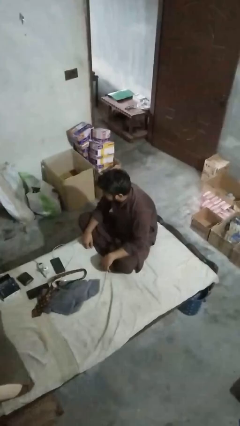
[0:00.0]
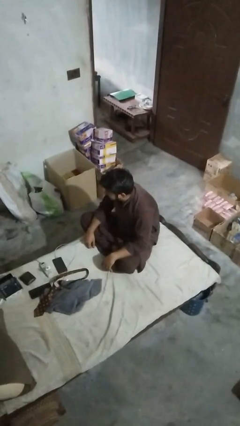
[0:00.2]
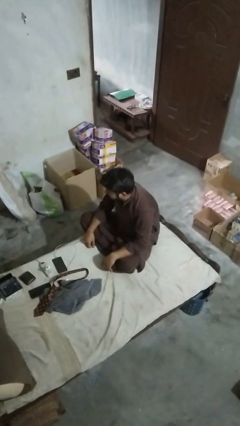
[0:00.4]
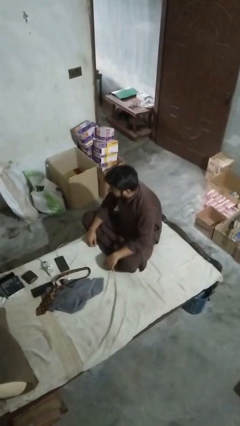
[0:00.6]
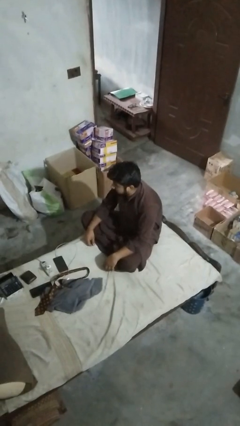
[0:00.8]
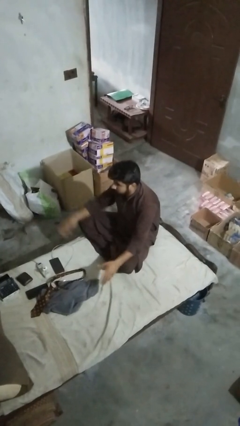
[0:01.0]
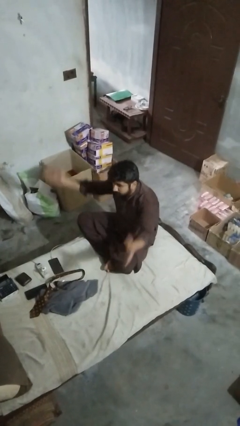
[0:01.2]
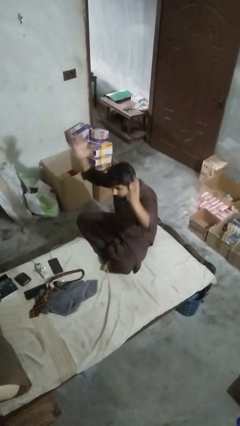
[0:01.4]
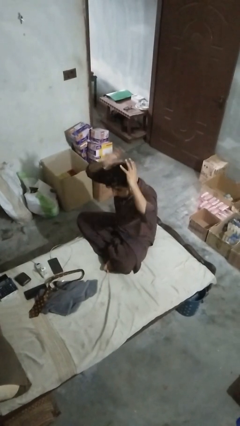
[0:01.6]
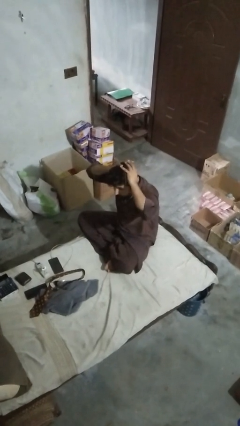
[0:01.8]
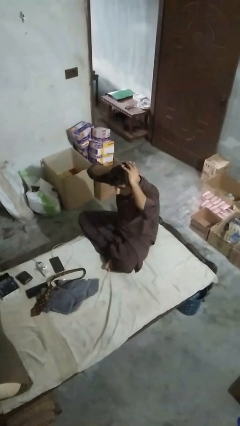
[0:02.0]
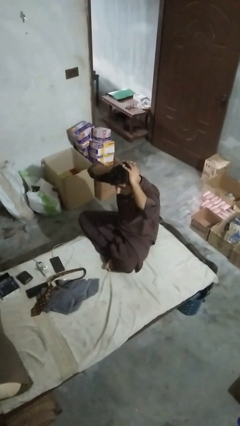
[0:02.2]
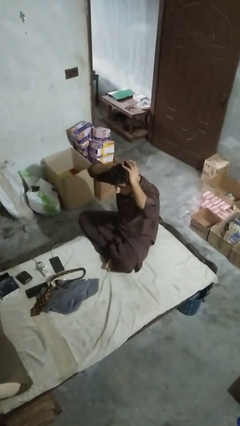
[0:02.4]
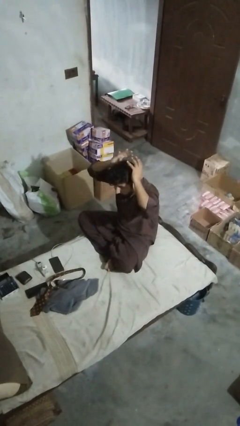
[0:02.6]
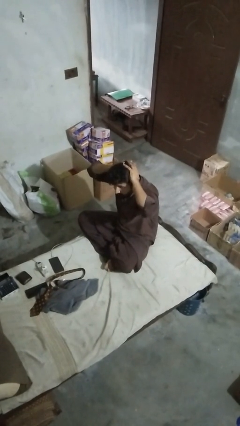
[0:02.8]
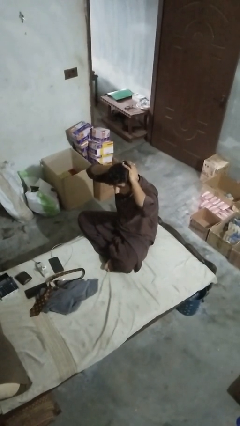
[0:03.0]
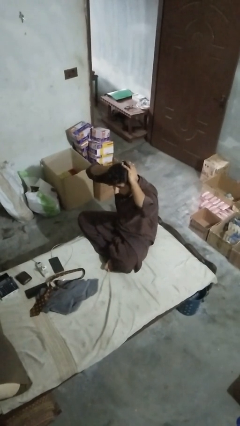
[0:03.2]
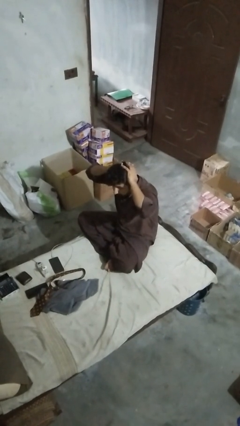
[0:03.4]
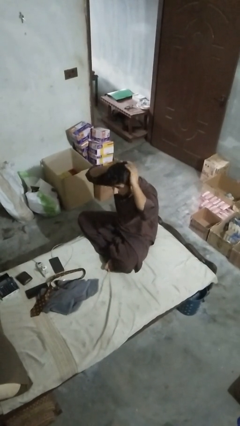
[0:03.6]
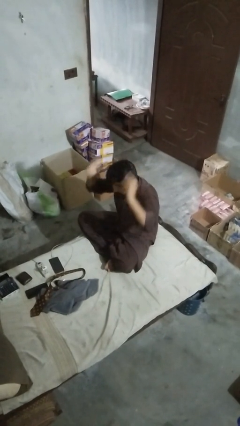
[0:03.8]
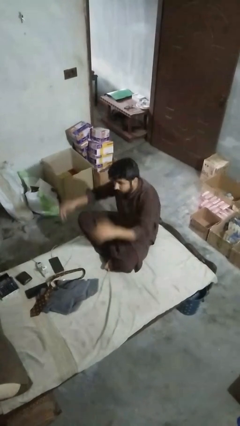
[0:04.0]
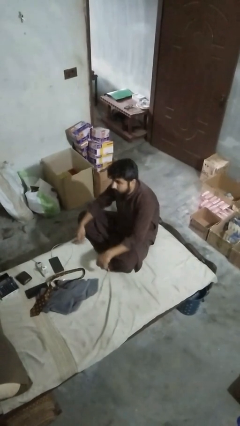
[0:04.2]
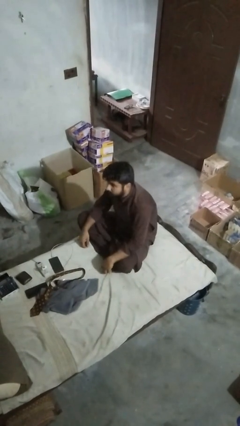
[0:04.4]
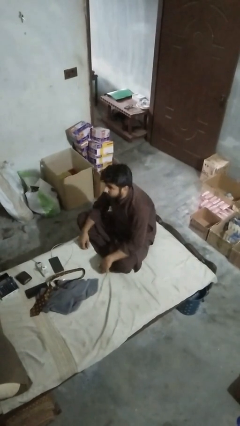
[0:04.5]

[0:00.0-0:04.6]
person pats head

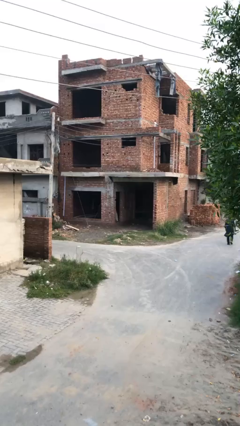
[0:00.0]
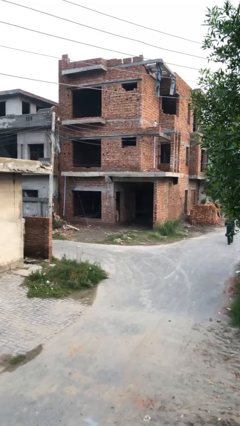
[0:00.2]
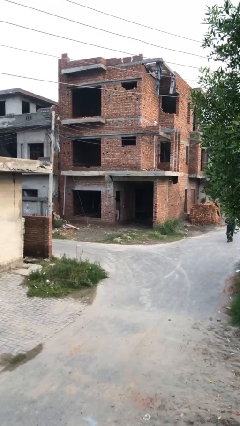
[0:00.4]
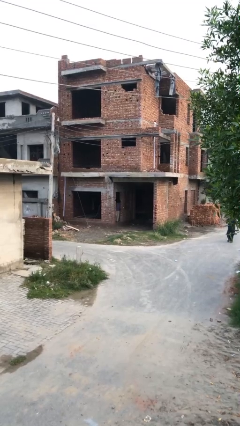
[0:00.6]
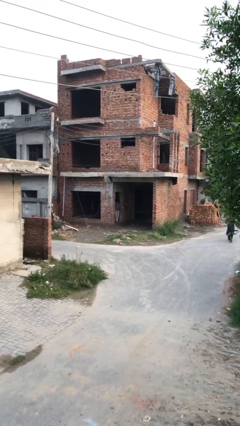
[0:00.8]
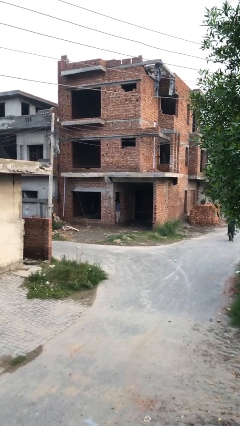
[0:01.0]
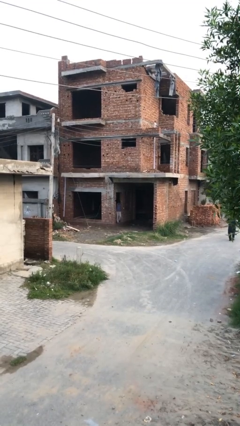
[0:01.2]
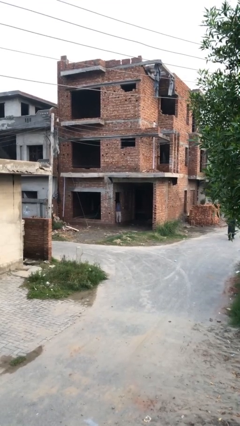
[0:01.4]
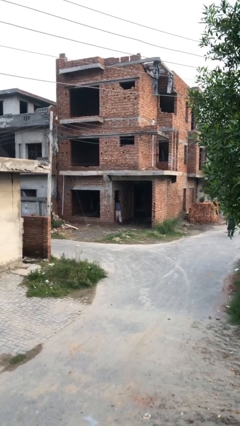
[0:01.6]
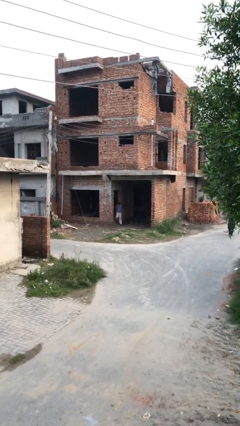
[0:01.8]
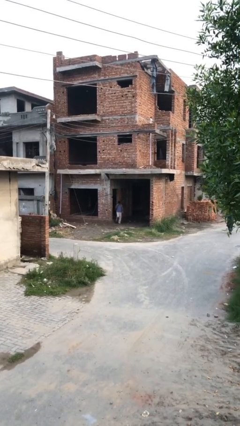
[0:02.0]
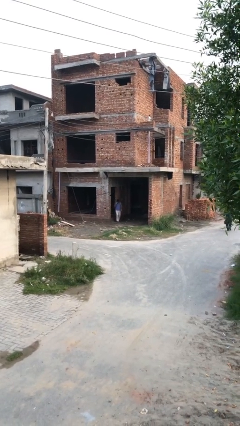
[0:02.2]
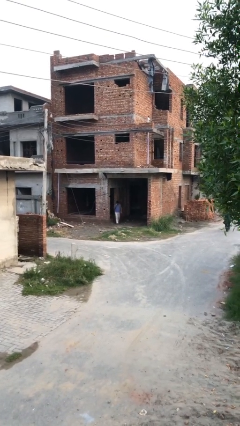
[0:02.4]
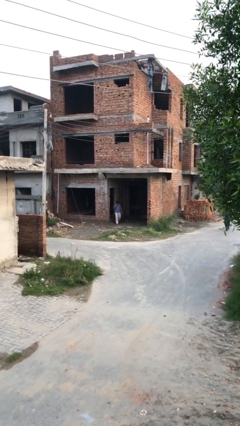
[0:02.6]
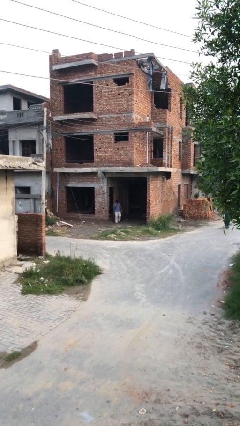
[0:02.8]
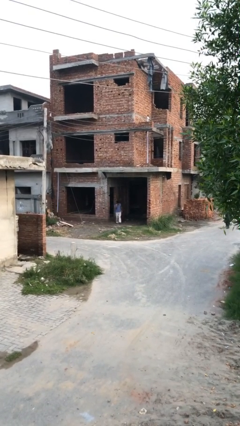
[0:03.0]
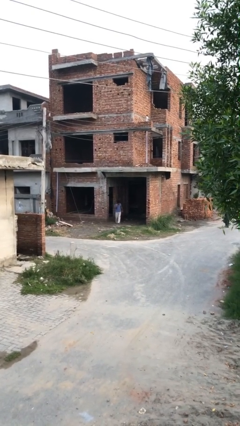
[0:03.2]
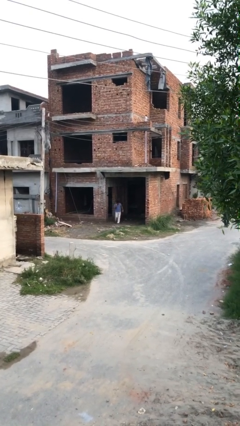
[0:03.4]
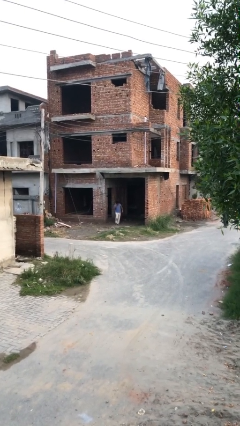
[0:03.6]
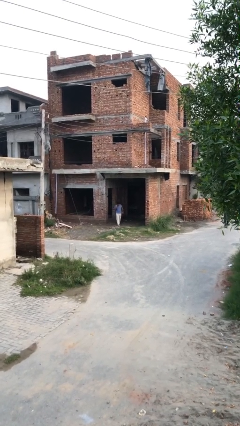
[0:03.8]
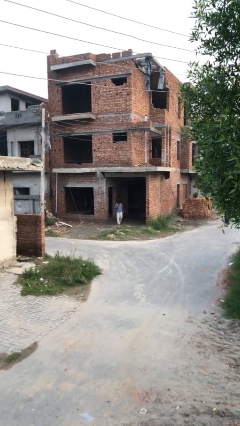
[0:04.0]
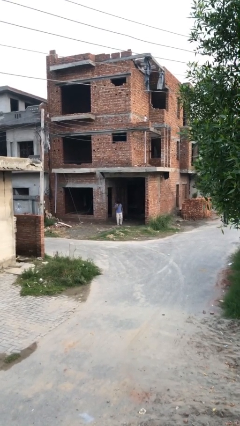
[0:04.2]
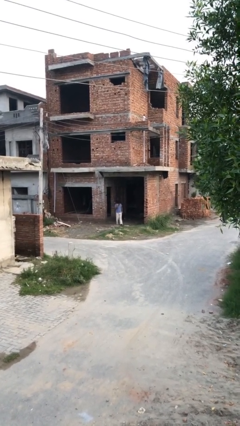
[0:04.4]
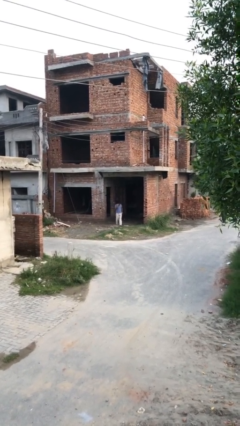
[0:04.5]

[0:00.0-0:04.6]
person enters scene through structure

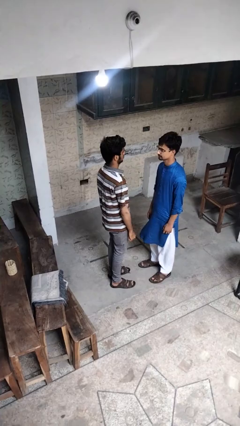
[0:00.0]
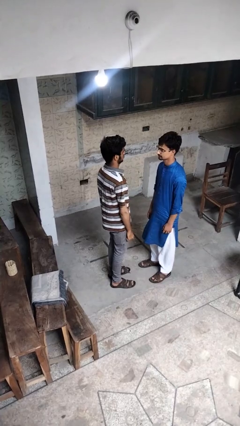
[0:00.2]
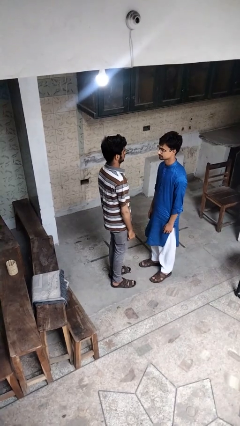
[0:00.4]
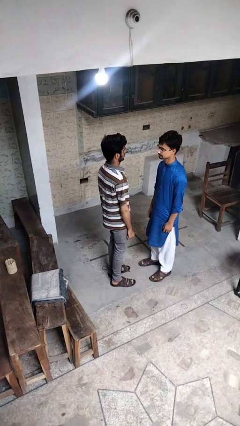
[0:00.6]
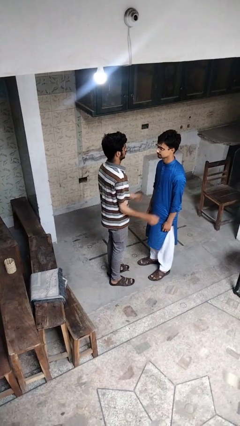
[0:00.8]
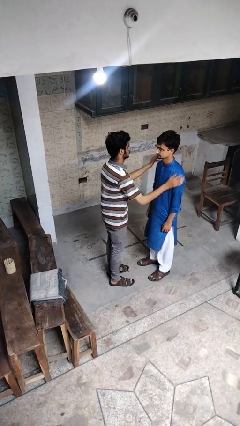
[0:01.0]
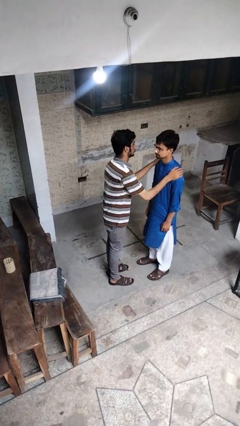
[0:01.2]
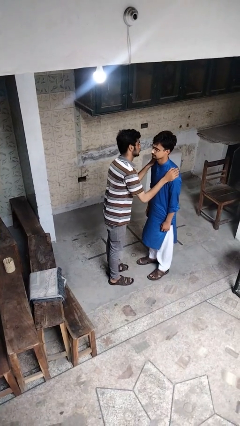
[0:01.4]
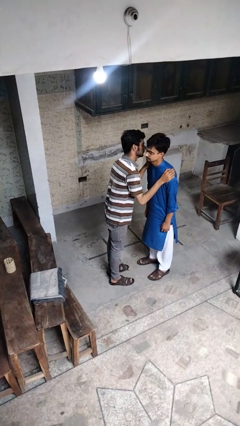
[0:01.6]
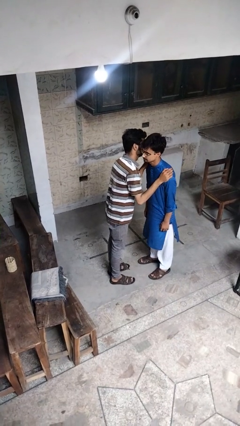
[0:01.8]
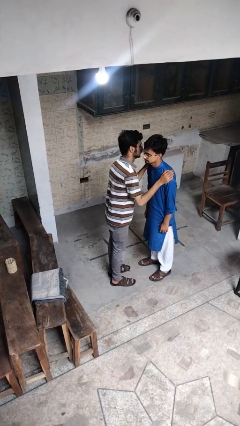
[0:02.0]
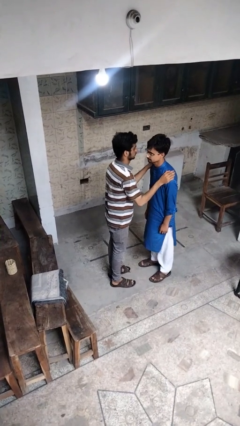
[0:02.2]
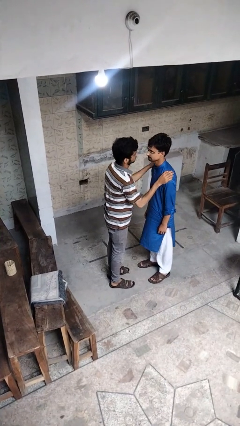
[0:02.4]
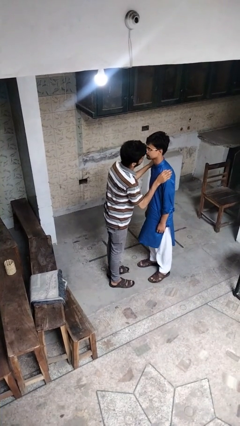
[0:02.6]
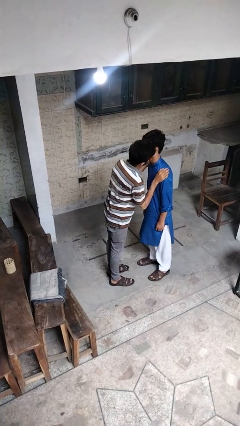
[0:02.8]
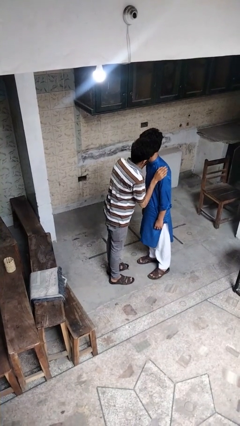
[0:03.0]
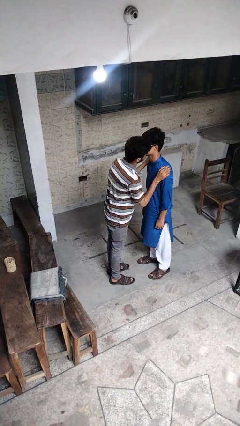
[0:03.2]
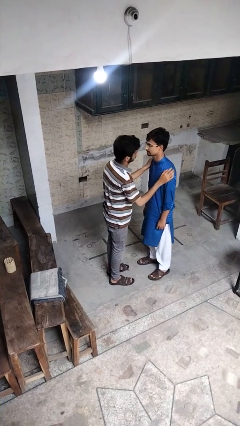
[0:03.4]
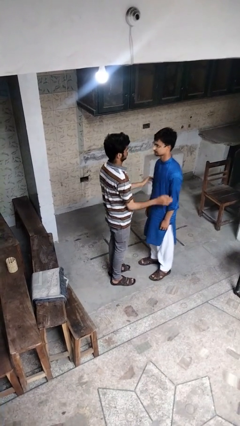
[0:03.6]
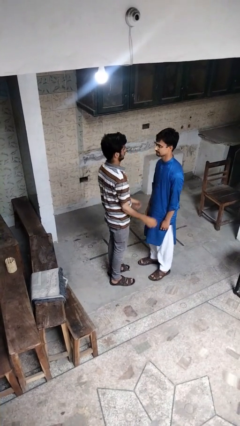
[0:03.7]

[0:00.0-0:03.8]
person kisses cheek of person

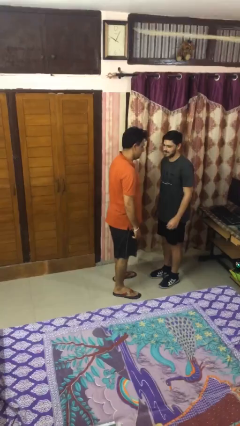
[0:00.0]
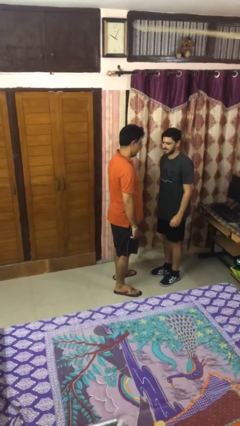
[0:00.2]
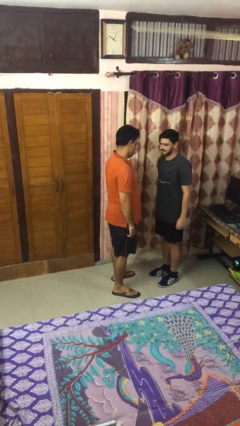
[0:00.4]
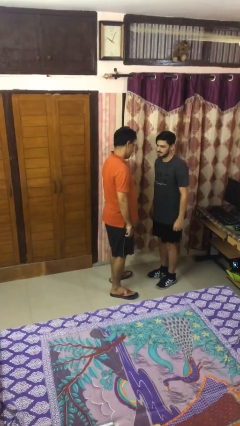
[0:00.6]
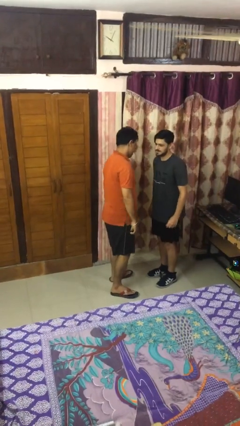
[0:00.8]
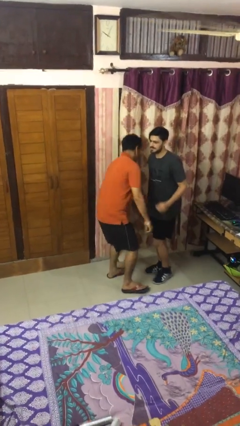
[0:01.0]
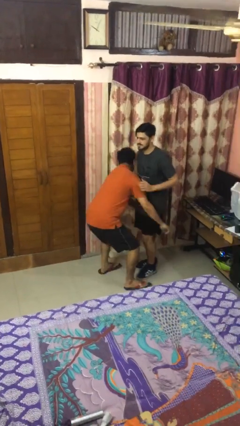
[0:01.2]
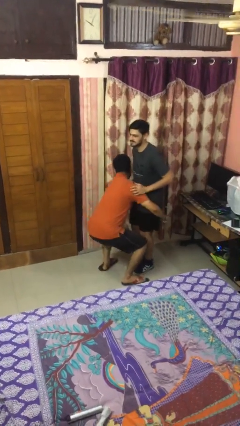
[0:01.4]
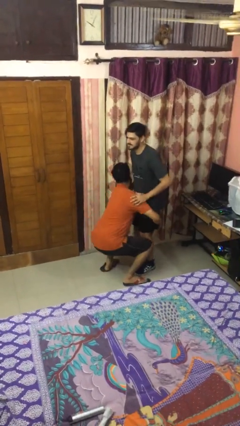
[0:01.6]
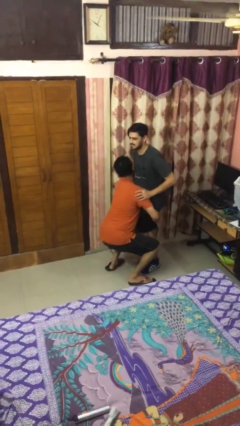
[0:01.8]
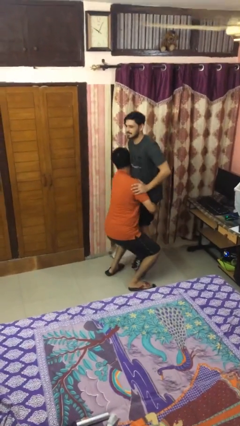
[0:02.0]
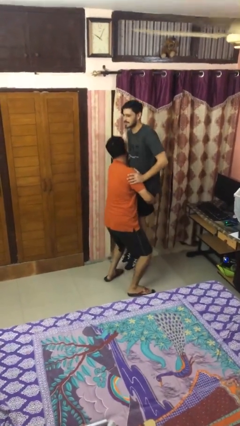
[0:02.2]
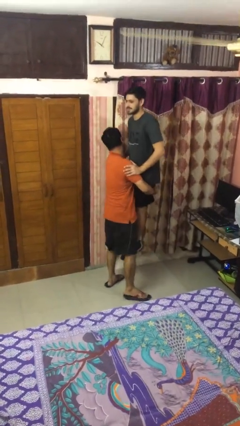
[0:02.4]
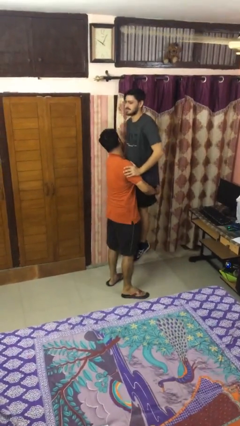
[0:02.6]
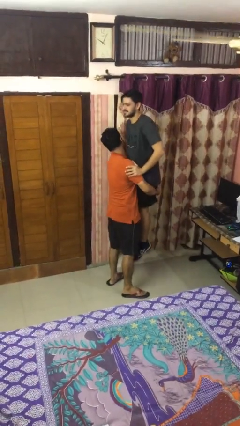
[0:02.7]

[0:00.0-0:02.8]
person picks up person

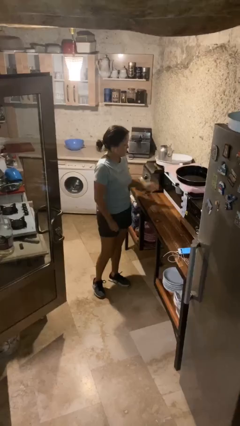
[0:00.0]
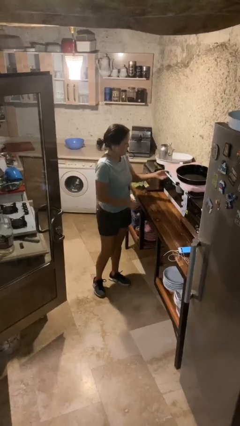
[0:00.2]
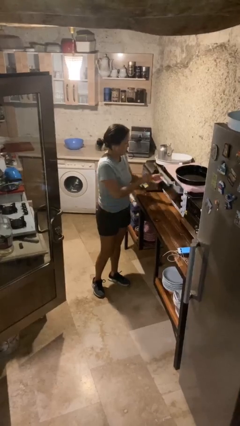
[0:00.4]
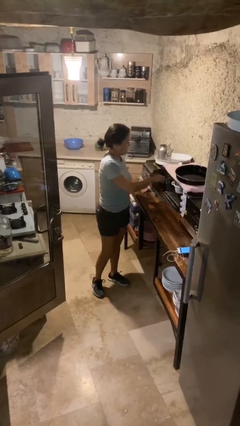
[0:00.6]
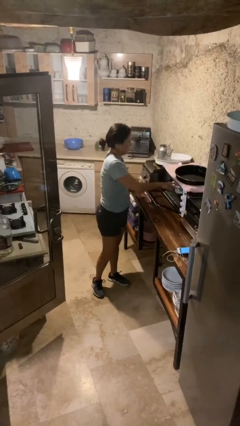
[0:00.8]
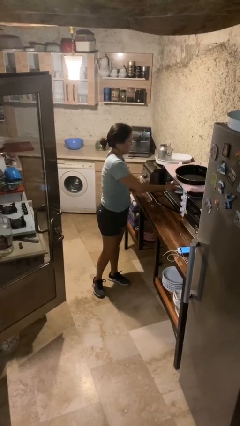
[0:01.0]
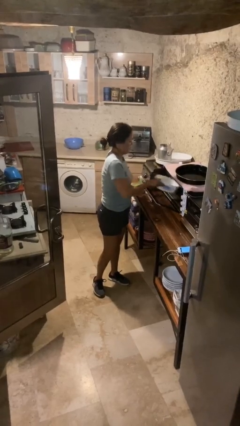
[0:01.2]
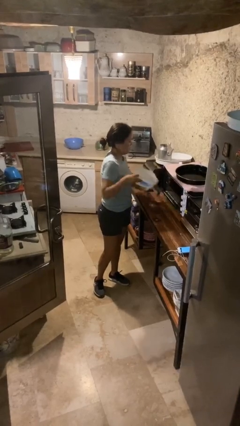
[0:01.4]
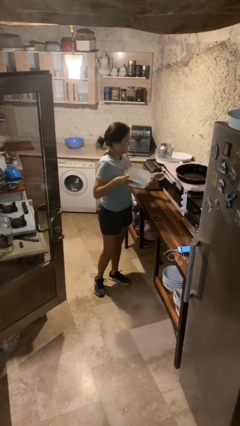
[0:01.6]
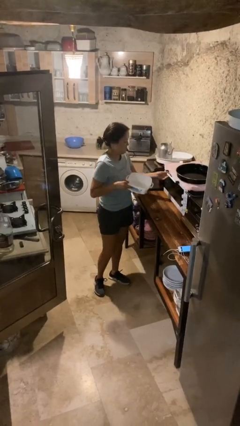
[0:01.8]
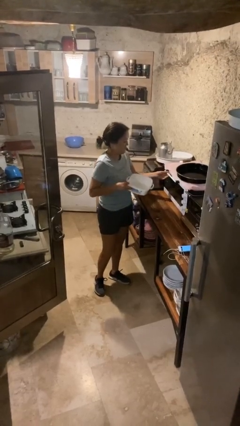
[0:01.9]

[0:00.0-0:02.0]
person takes object from microwave
